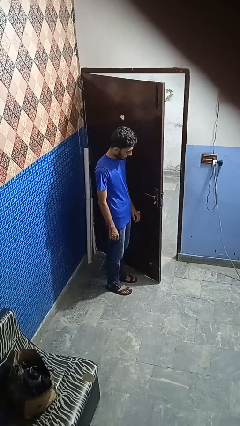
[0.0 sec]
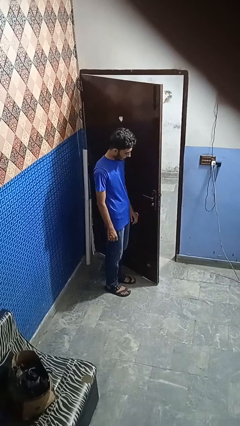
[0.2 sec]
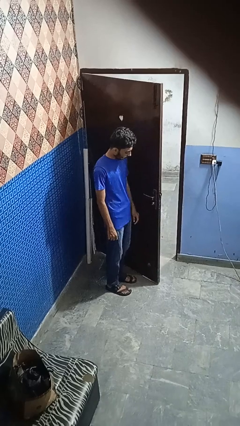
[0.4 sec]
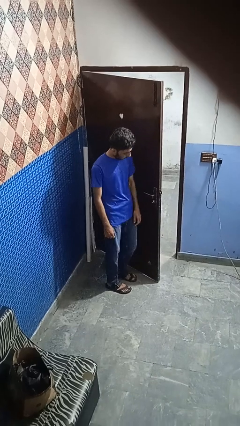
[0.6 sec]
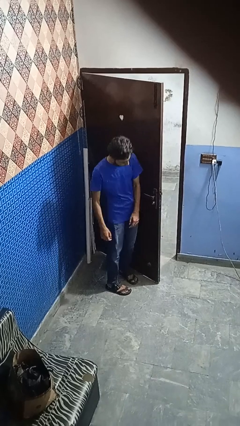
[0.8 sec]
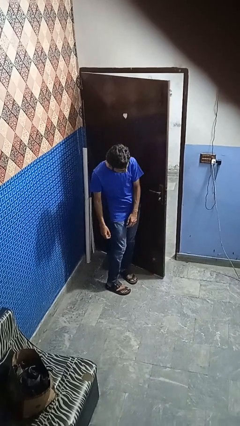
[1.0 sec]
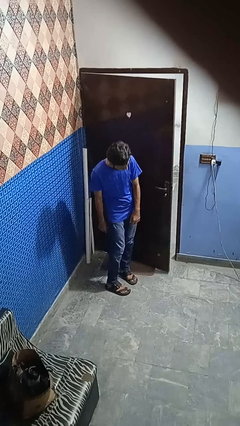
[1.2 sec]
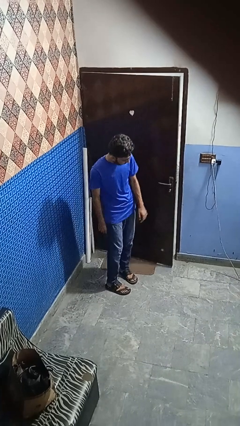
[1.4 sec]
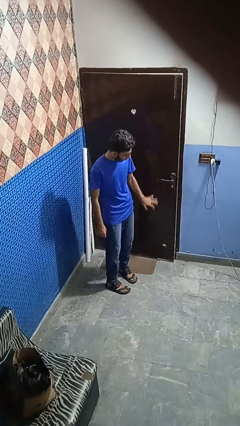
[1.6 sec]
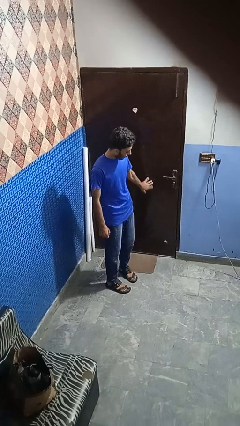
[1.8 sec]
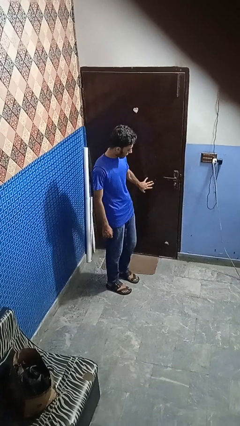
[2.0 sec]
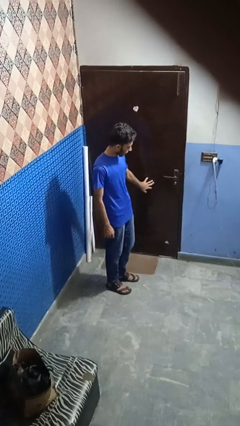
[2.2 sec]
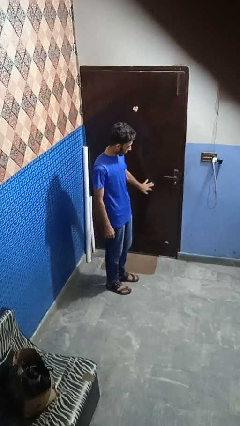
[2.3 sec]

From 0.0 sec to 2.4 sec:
person closes door with hip

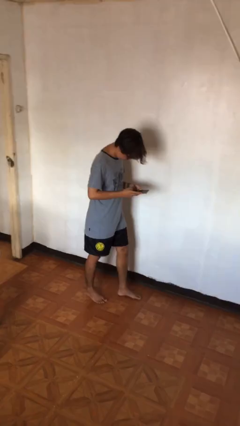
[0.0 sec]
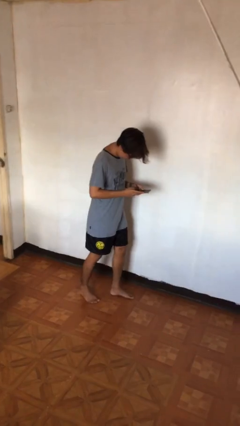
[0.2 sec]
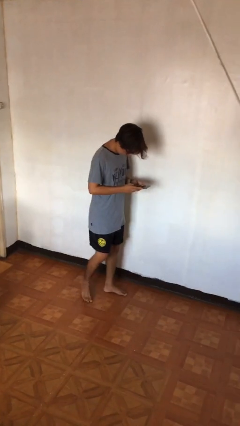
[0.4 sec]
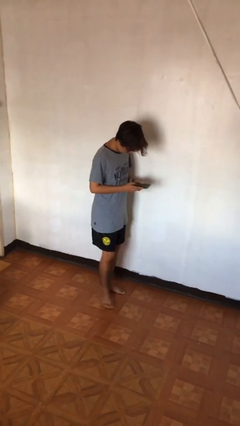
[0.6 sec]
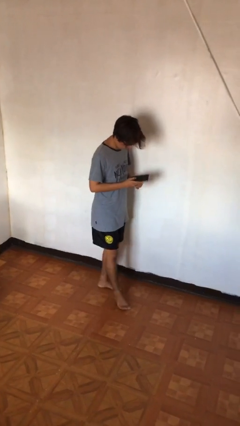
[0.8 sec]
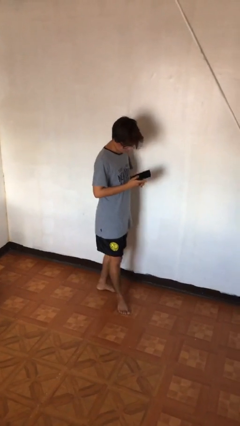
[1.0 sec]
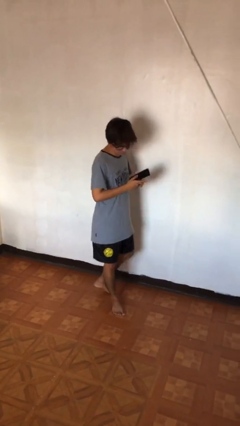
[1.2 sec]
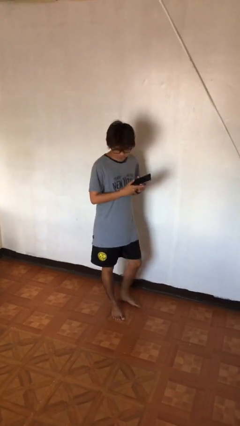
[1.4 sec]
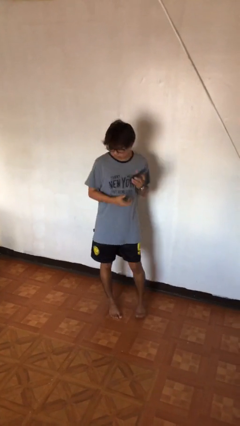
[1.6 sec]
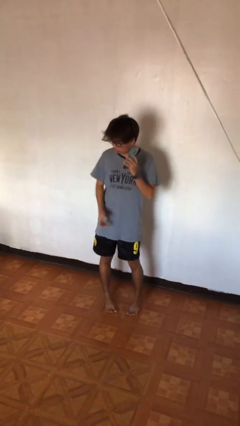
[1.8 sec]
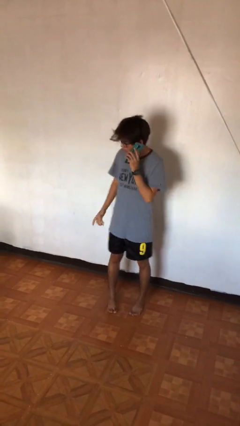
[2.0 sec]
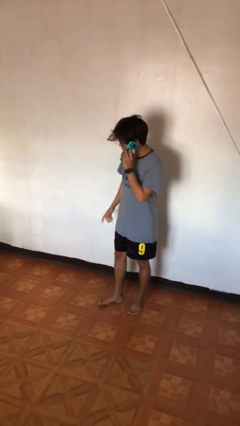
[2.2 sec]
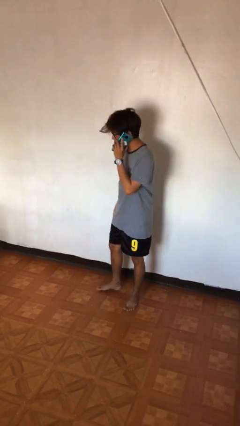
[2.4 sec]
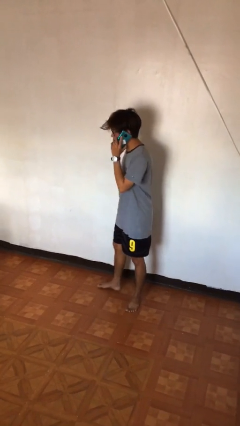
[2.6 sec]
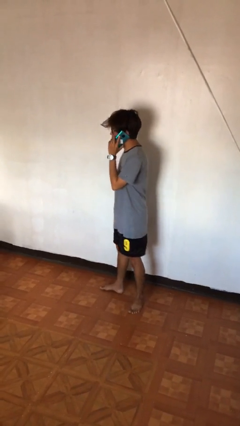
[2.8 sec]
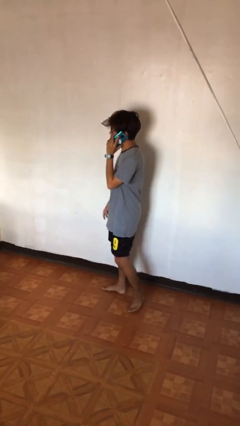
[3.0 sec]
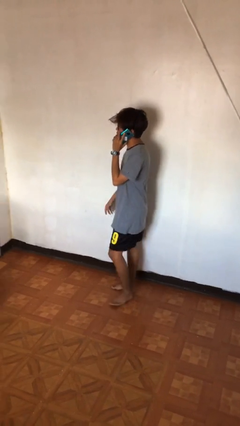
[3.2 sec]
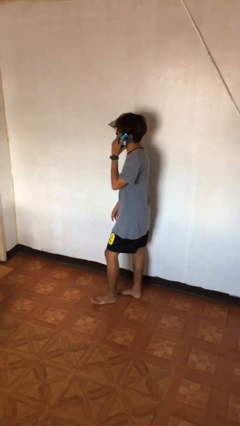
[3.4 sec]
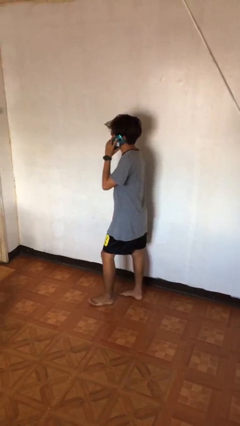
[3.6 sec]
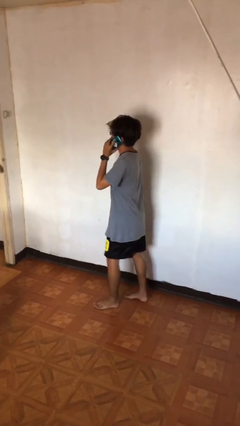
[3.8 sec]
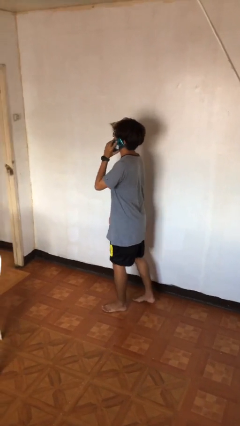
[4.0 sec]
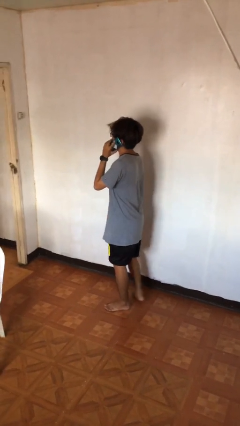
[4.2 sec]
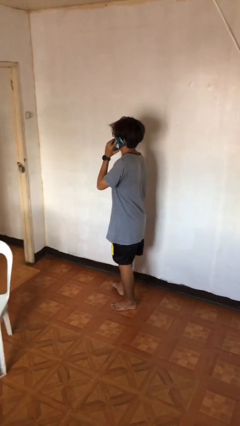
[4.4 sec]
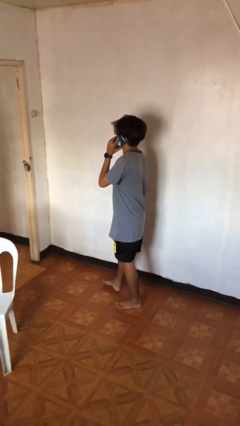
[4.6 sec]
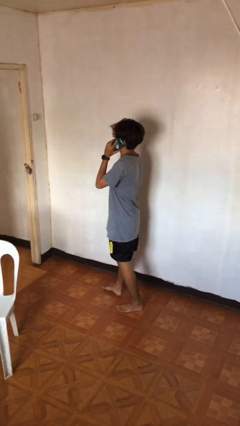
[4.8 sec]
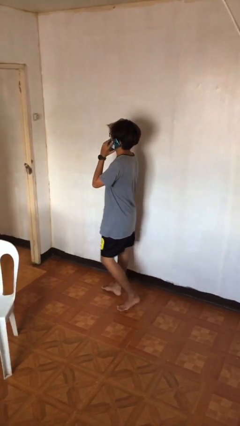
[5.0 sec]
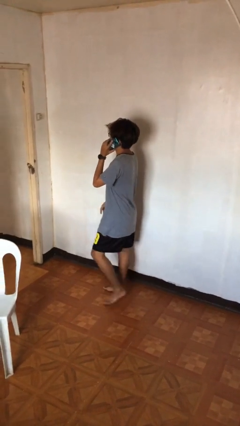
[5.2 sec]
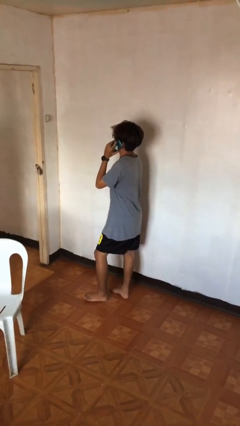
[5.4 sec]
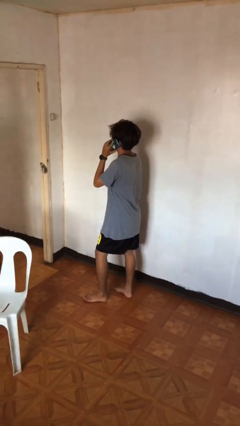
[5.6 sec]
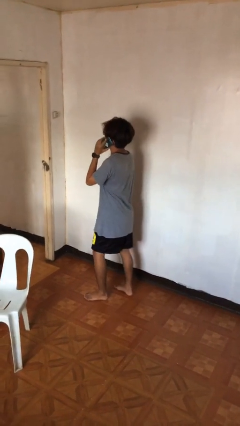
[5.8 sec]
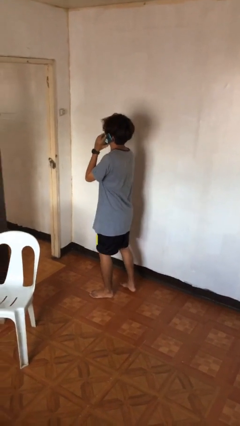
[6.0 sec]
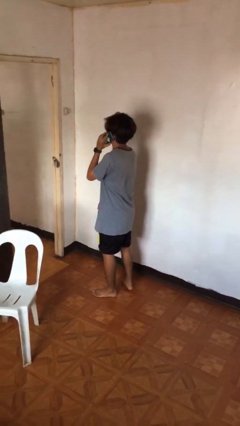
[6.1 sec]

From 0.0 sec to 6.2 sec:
person talks on phone

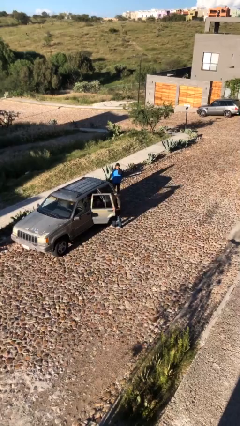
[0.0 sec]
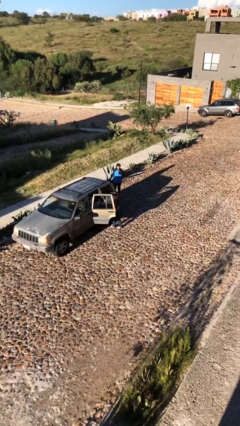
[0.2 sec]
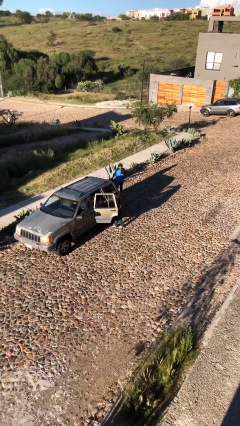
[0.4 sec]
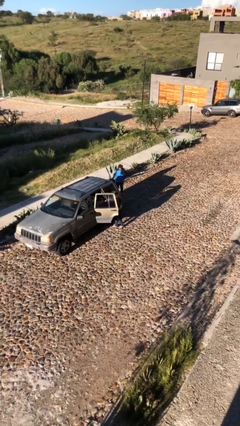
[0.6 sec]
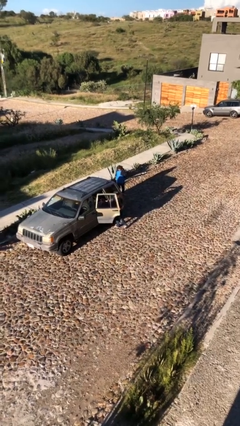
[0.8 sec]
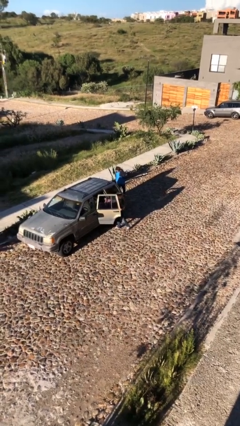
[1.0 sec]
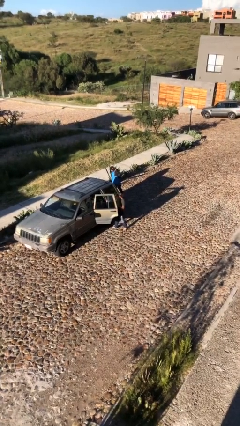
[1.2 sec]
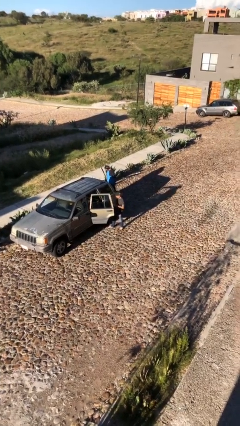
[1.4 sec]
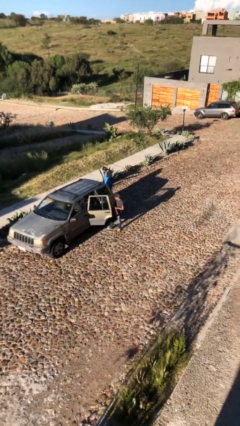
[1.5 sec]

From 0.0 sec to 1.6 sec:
person unloads car

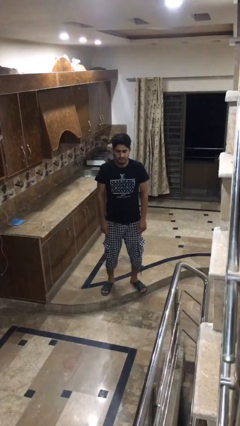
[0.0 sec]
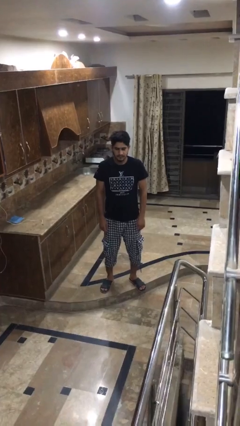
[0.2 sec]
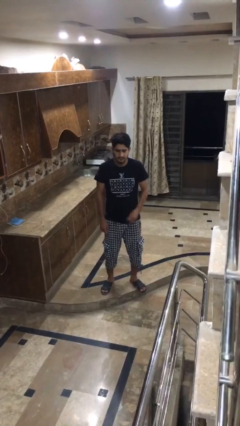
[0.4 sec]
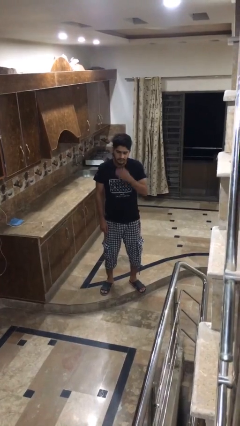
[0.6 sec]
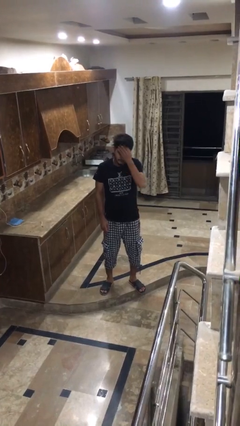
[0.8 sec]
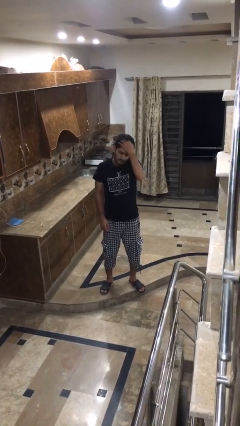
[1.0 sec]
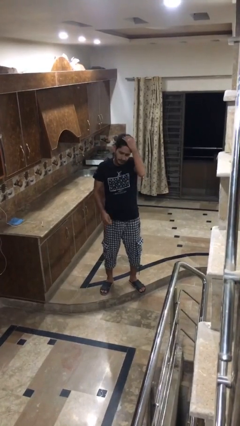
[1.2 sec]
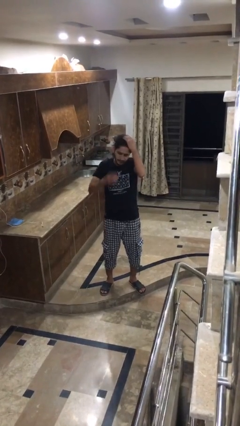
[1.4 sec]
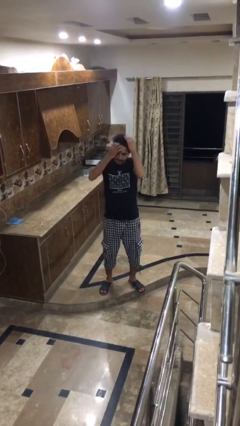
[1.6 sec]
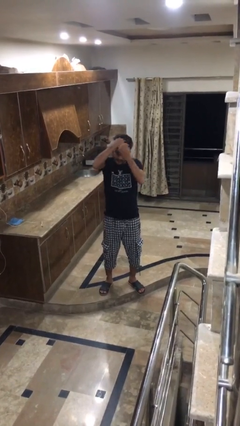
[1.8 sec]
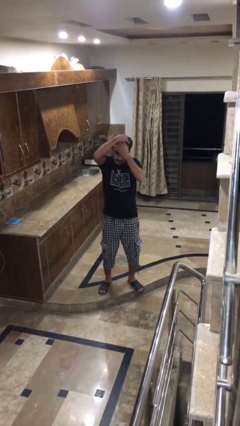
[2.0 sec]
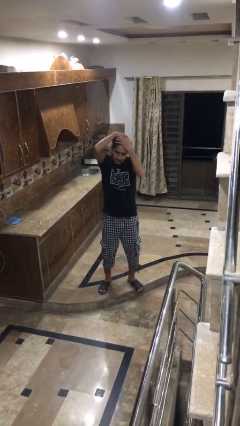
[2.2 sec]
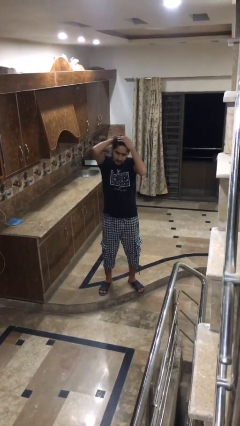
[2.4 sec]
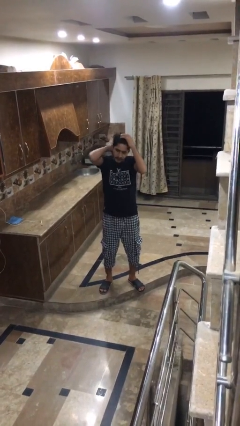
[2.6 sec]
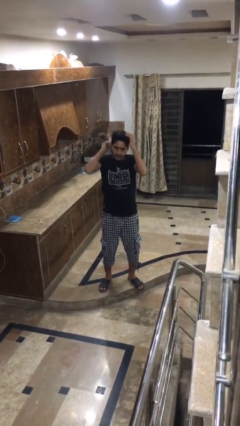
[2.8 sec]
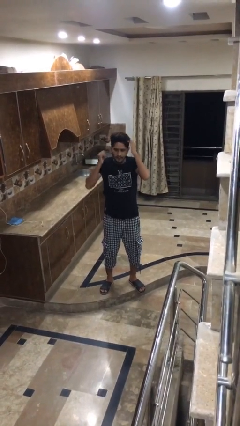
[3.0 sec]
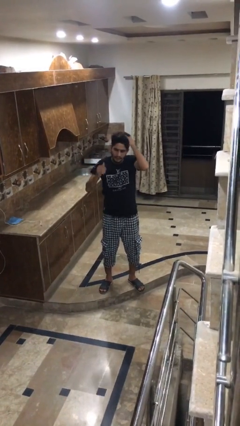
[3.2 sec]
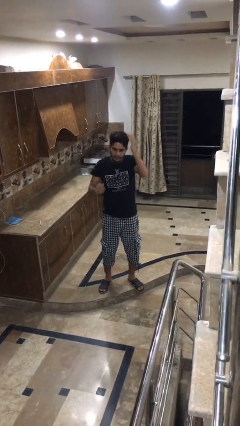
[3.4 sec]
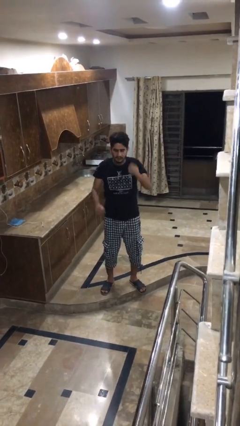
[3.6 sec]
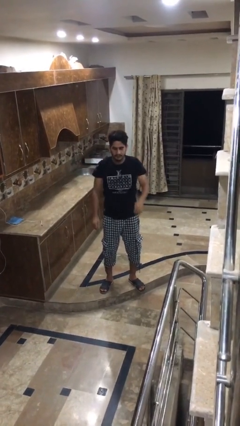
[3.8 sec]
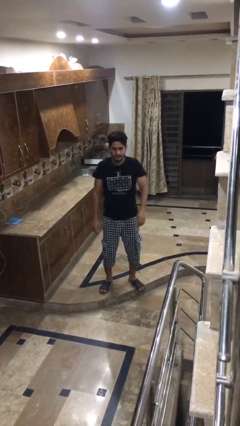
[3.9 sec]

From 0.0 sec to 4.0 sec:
person strokes hair

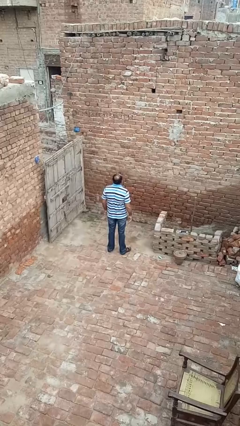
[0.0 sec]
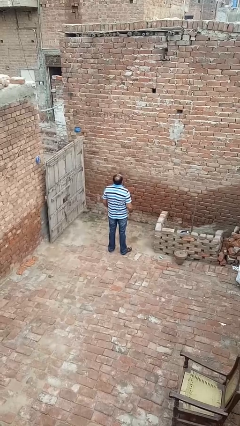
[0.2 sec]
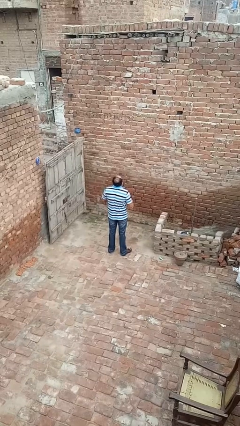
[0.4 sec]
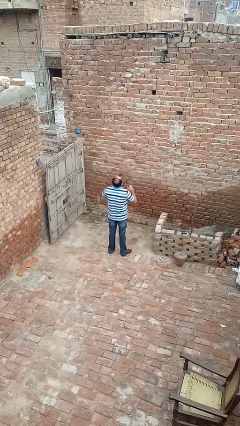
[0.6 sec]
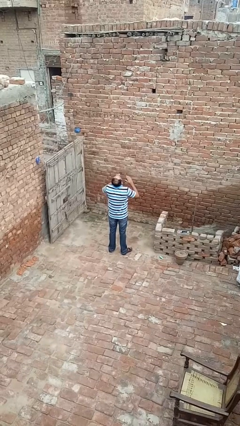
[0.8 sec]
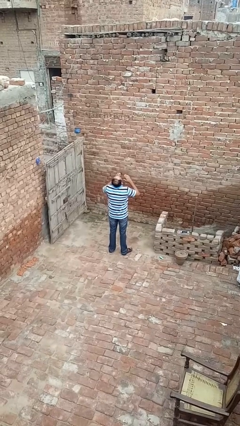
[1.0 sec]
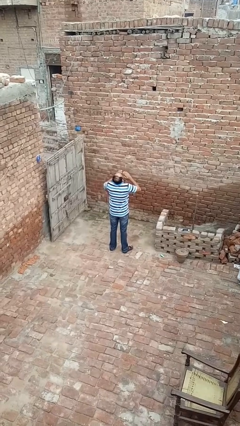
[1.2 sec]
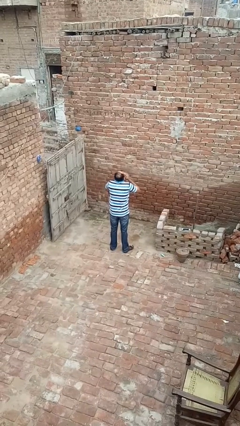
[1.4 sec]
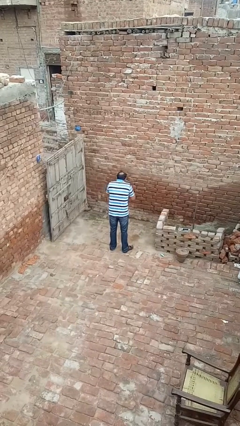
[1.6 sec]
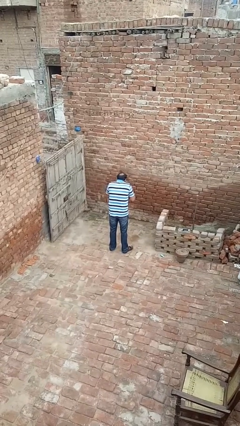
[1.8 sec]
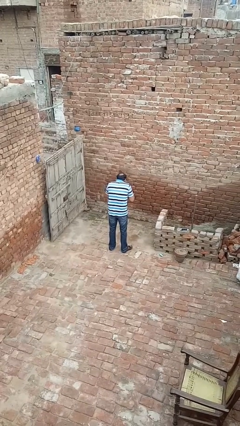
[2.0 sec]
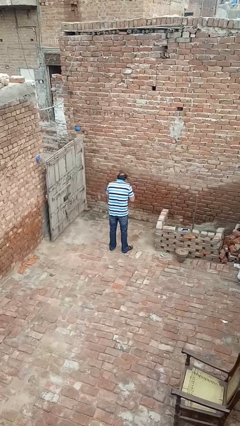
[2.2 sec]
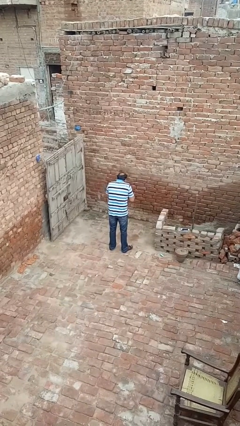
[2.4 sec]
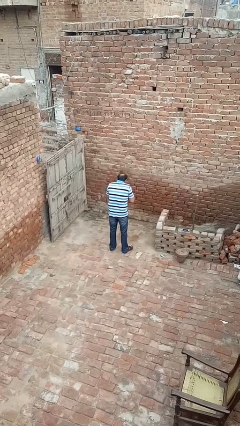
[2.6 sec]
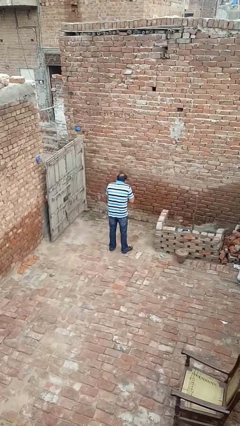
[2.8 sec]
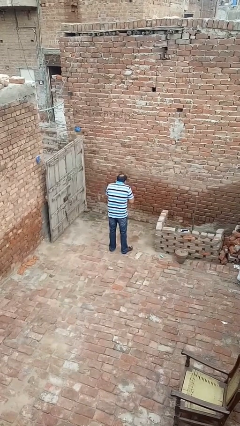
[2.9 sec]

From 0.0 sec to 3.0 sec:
person sneezes into hand

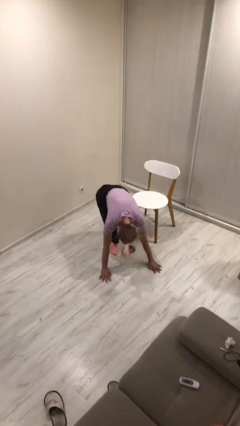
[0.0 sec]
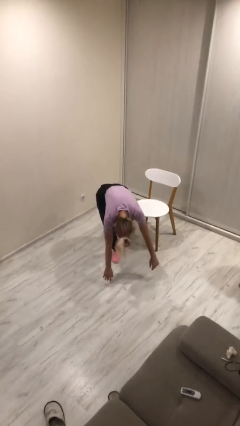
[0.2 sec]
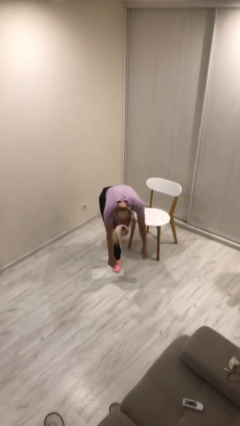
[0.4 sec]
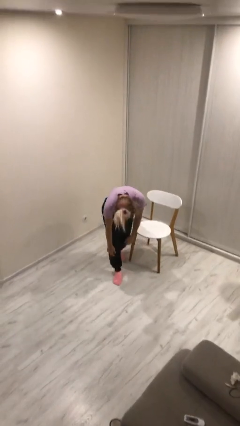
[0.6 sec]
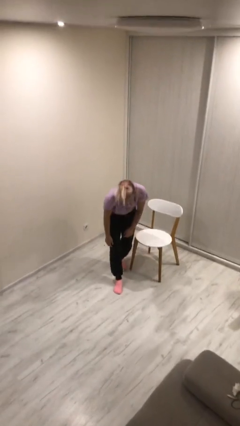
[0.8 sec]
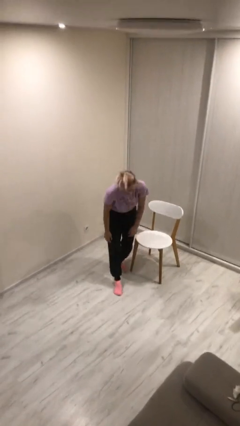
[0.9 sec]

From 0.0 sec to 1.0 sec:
person stands up from floor
